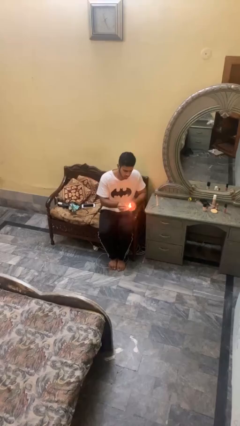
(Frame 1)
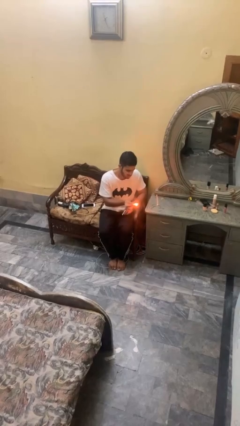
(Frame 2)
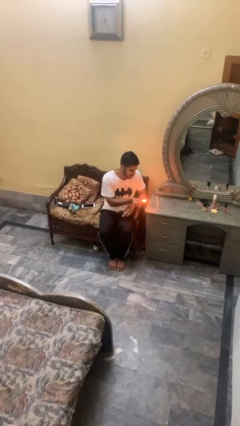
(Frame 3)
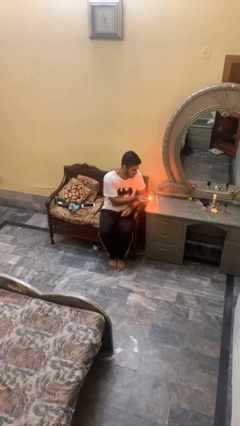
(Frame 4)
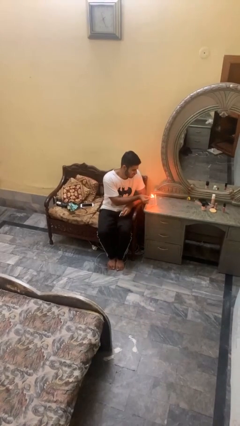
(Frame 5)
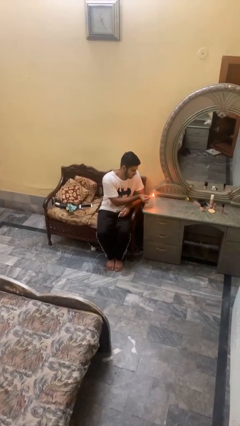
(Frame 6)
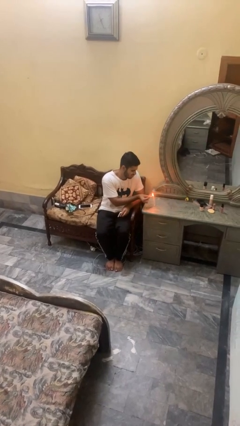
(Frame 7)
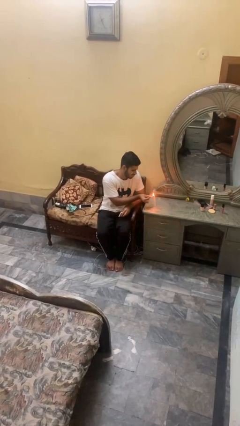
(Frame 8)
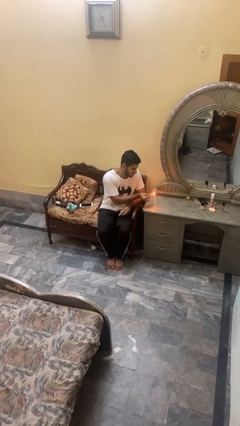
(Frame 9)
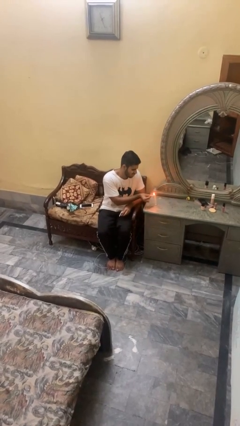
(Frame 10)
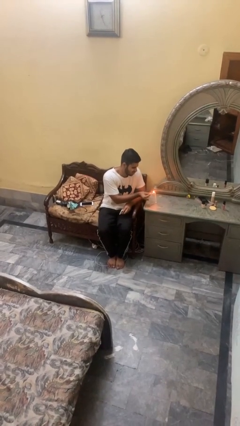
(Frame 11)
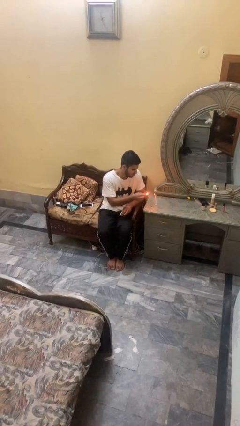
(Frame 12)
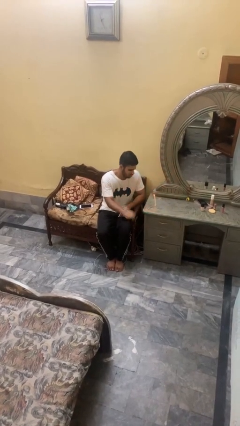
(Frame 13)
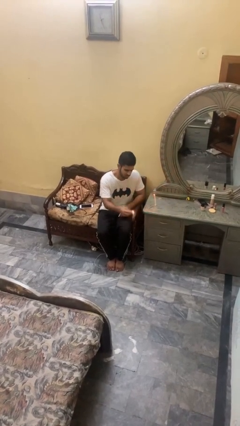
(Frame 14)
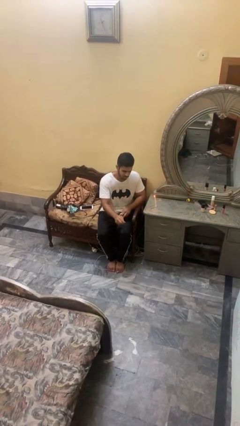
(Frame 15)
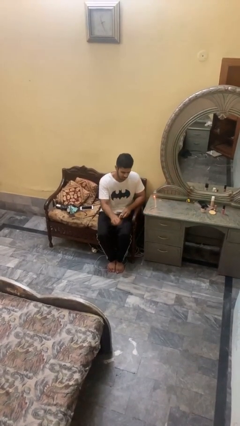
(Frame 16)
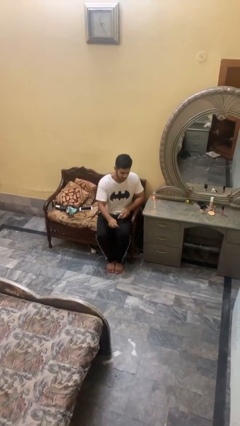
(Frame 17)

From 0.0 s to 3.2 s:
person lights candle

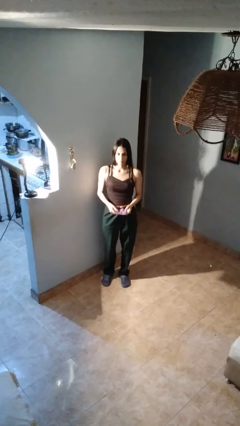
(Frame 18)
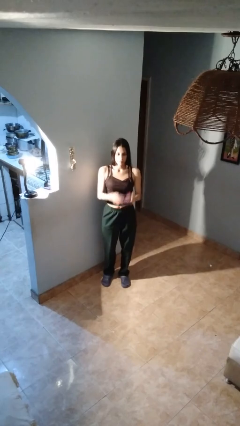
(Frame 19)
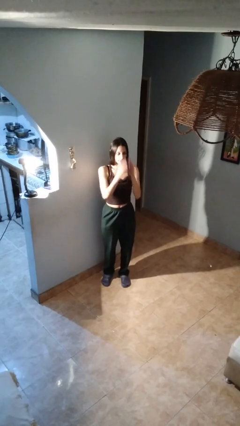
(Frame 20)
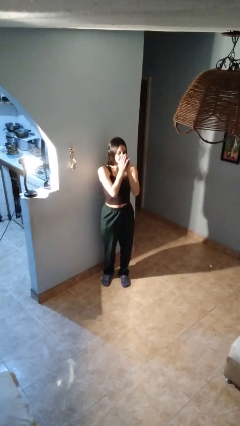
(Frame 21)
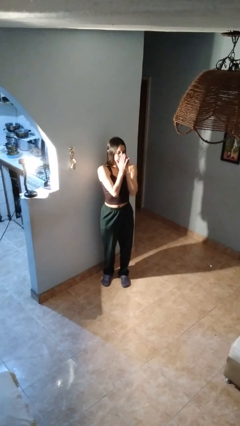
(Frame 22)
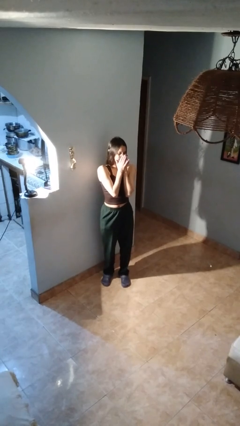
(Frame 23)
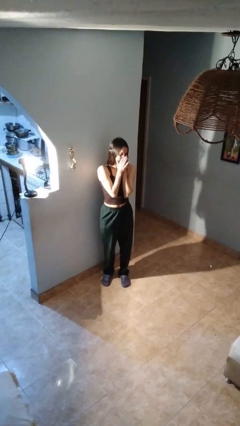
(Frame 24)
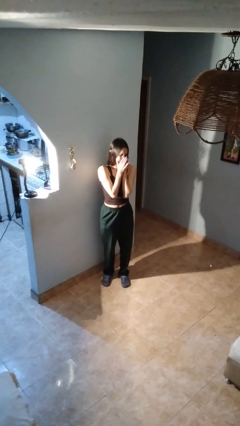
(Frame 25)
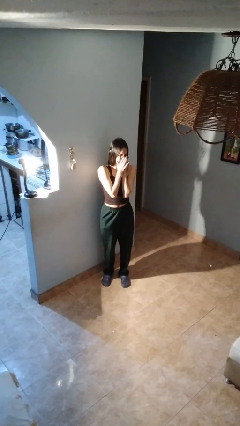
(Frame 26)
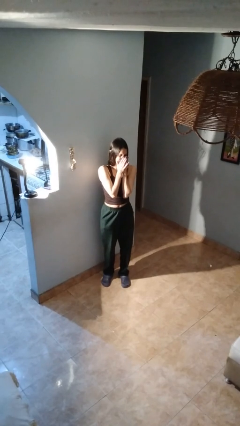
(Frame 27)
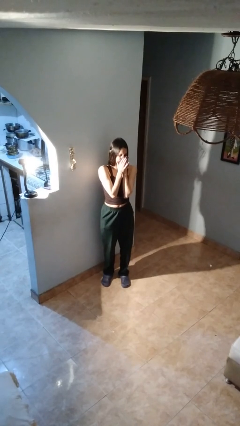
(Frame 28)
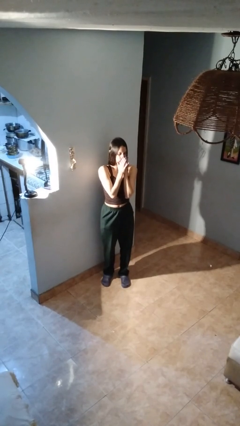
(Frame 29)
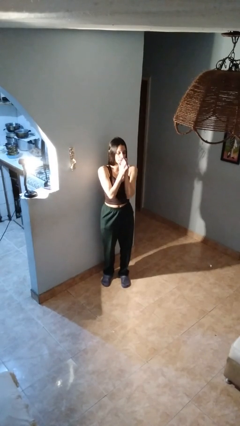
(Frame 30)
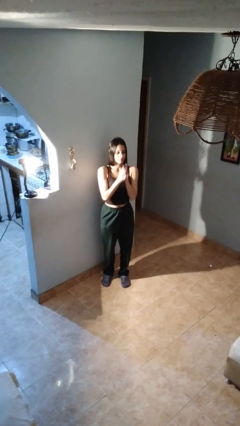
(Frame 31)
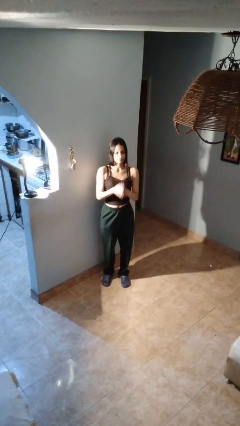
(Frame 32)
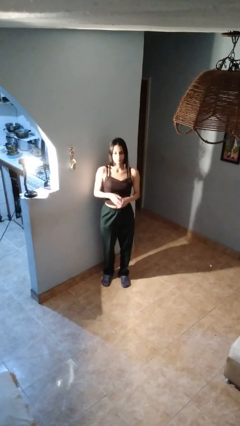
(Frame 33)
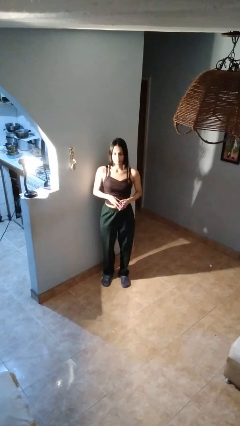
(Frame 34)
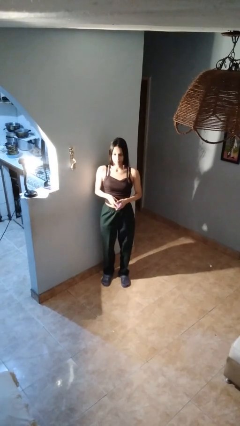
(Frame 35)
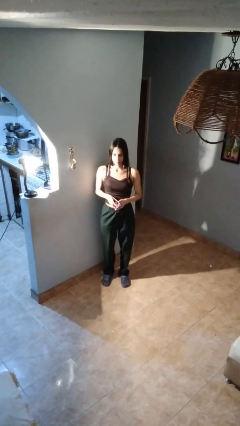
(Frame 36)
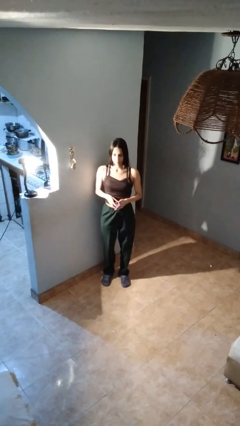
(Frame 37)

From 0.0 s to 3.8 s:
person blows nose

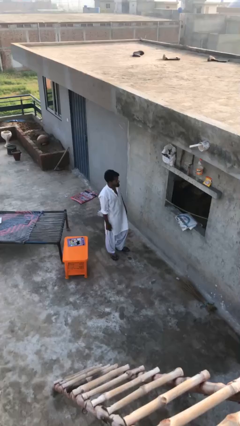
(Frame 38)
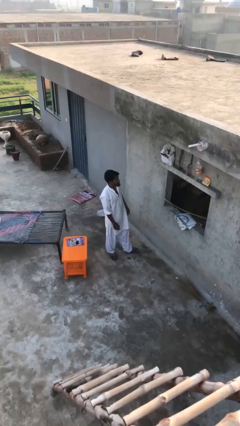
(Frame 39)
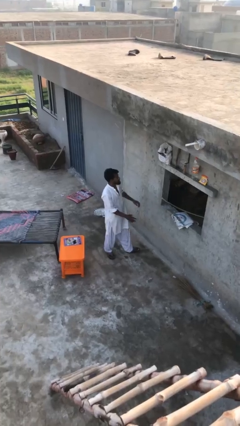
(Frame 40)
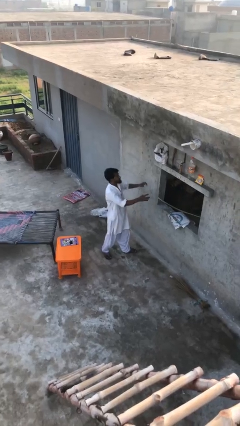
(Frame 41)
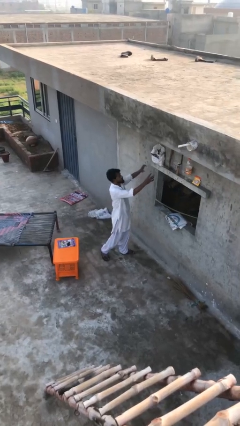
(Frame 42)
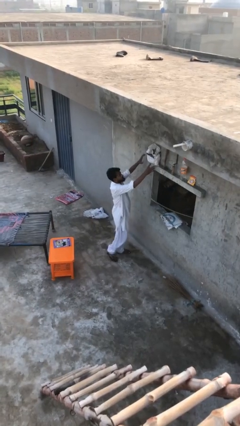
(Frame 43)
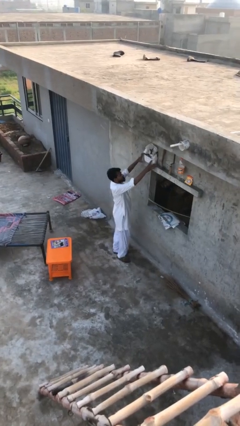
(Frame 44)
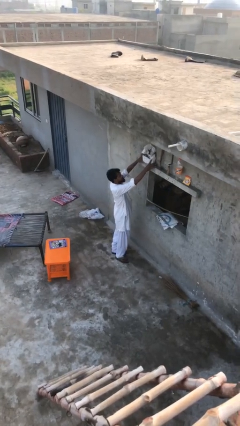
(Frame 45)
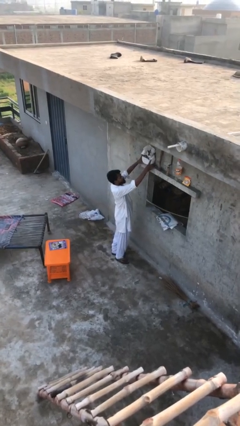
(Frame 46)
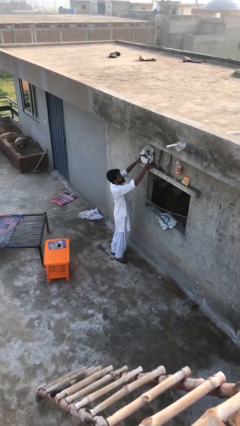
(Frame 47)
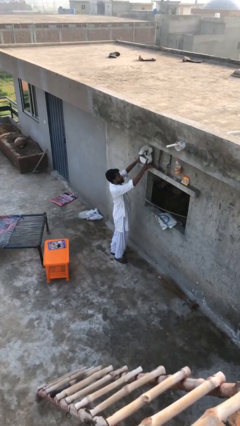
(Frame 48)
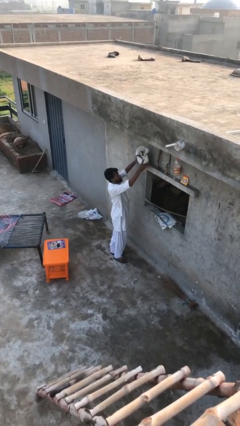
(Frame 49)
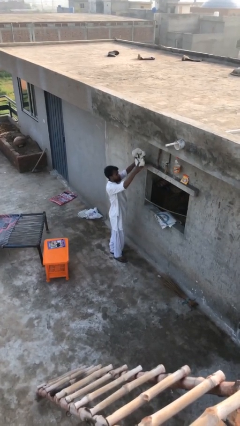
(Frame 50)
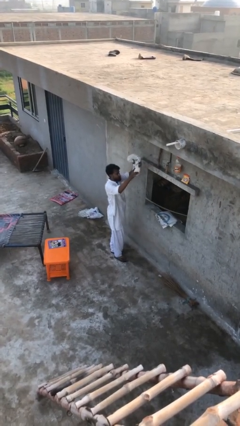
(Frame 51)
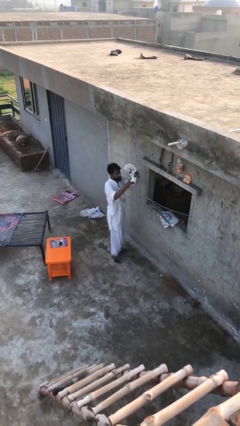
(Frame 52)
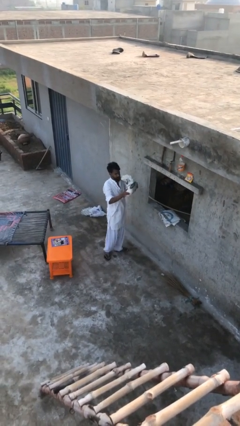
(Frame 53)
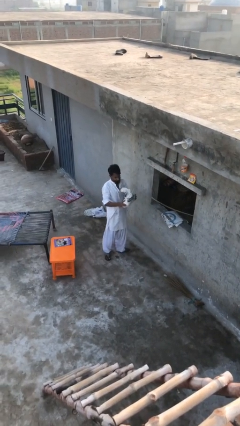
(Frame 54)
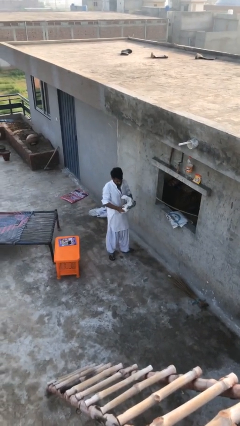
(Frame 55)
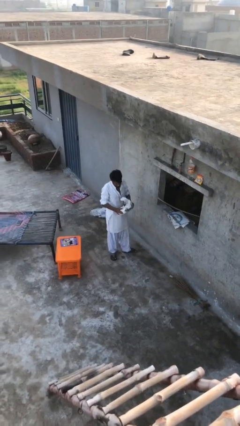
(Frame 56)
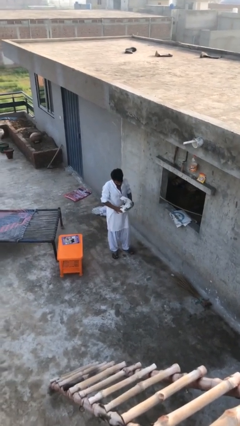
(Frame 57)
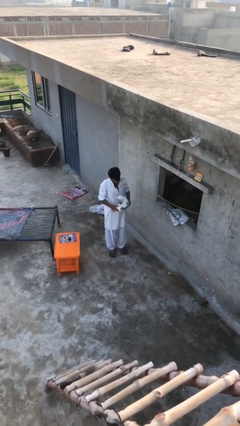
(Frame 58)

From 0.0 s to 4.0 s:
person picks up object from shelf

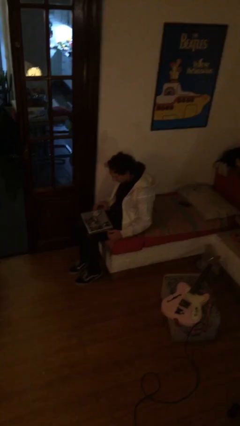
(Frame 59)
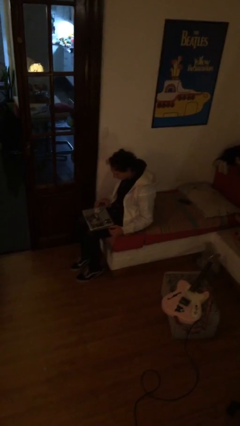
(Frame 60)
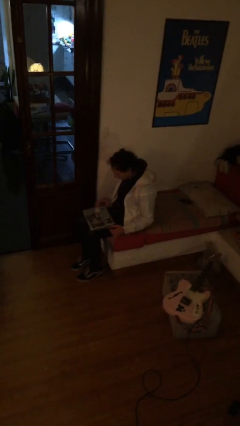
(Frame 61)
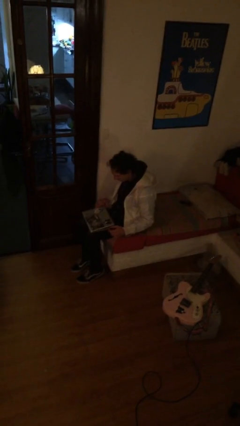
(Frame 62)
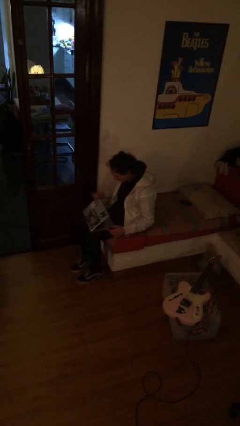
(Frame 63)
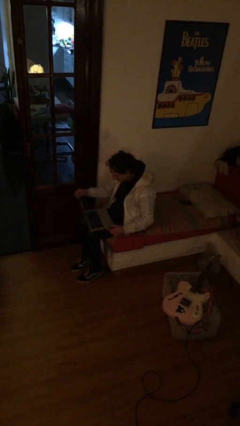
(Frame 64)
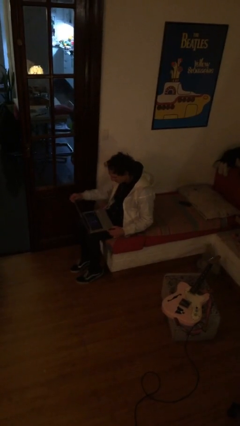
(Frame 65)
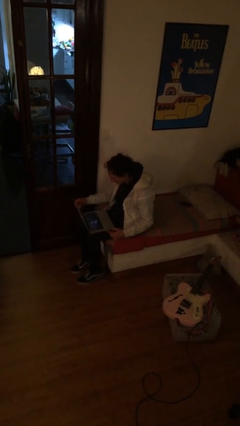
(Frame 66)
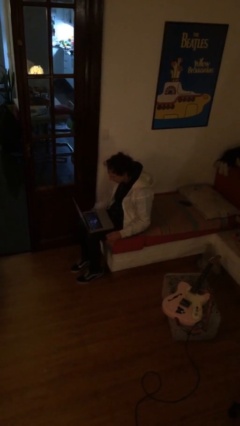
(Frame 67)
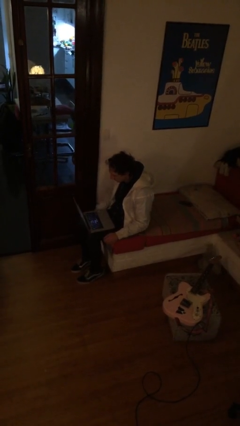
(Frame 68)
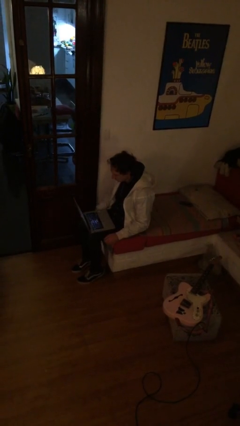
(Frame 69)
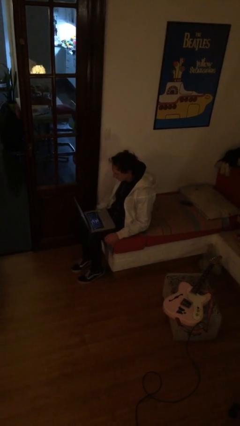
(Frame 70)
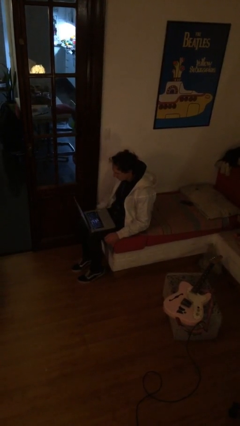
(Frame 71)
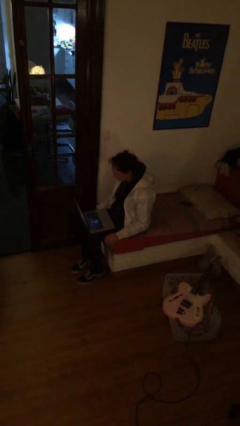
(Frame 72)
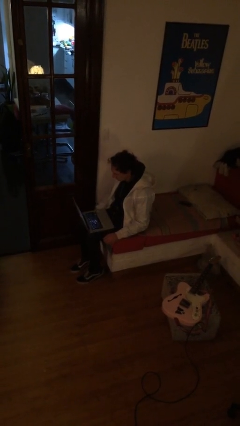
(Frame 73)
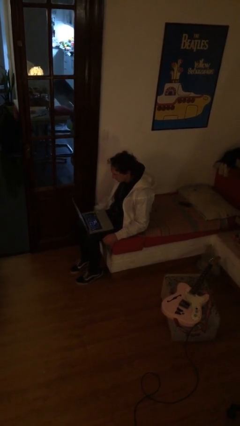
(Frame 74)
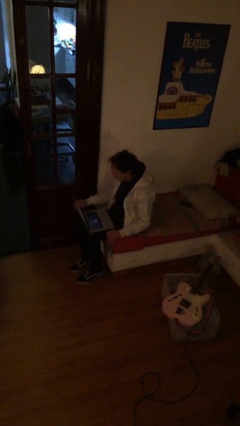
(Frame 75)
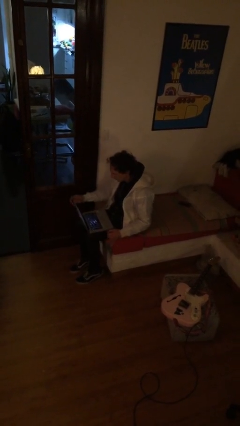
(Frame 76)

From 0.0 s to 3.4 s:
person opens laptop

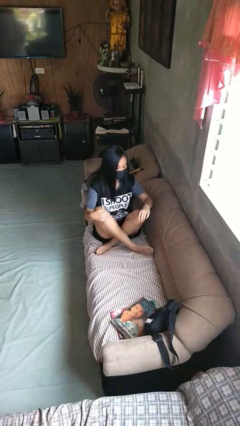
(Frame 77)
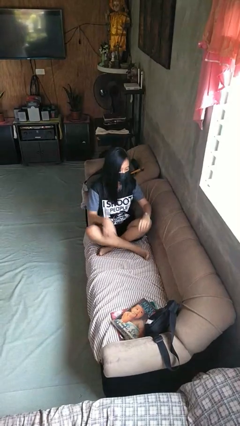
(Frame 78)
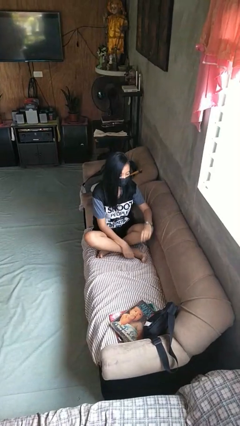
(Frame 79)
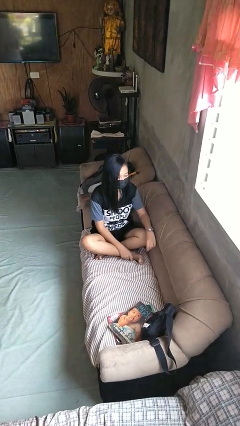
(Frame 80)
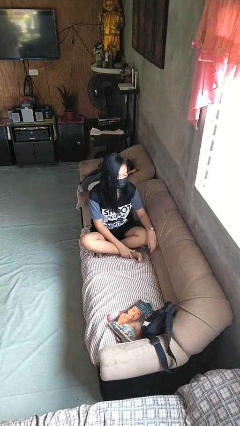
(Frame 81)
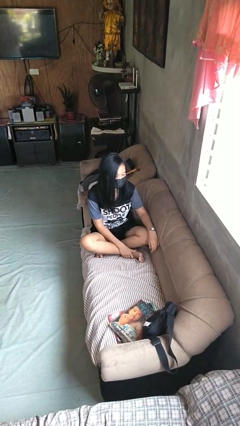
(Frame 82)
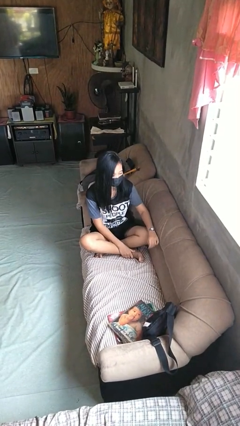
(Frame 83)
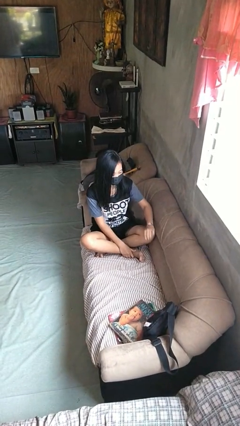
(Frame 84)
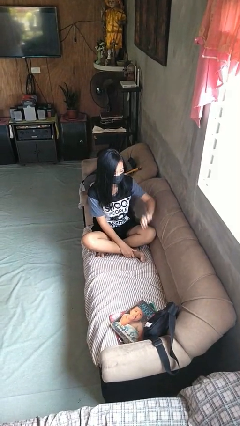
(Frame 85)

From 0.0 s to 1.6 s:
person looks at wristwatch

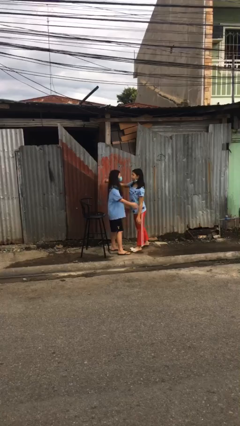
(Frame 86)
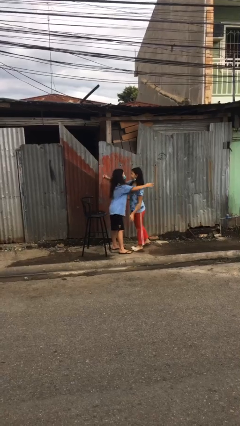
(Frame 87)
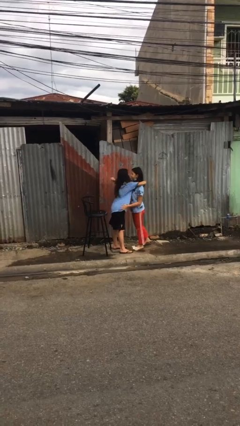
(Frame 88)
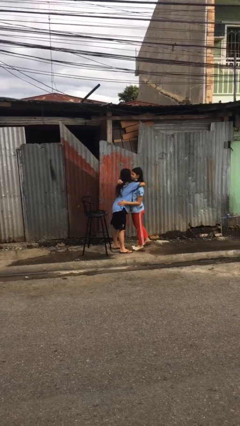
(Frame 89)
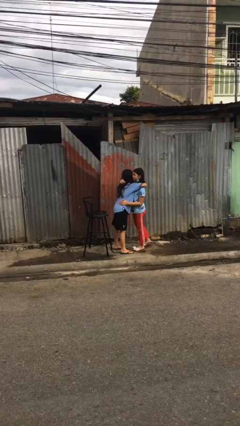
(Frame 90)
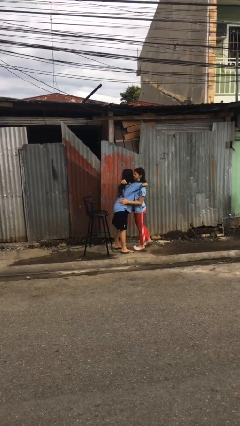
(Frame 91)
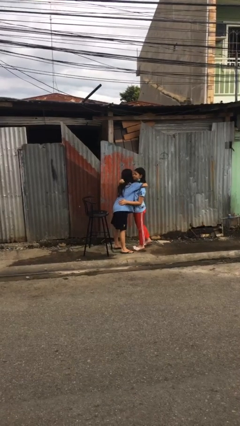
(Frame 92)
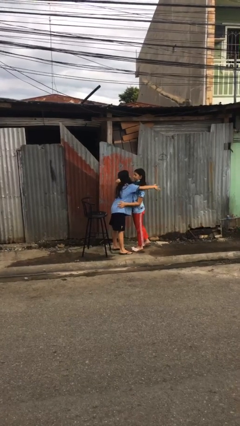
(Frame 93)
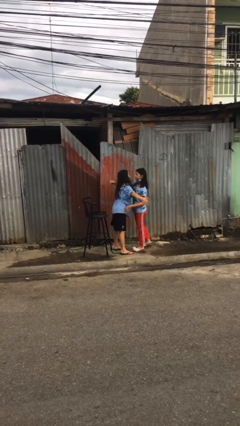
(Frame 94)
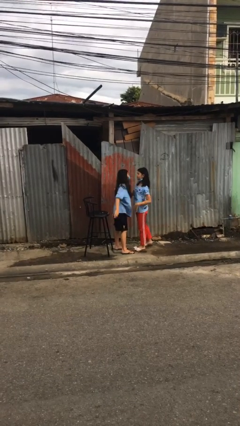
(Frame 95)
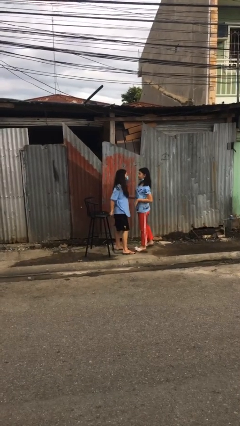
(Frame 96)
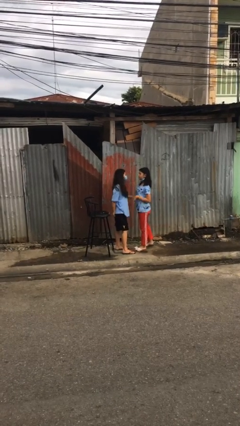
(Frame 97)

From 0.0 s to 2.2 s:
person embraces person
